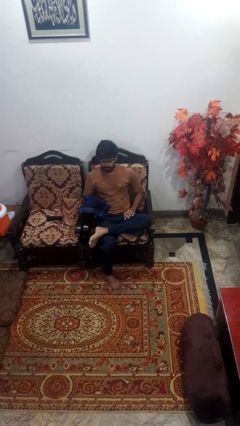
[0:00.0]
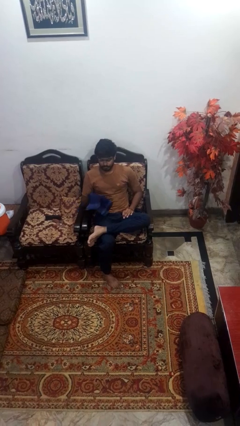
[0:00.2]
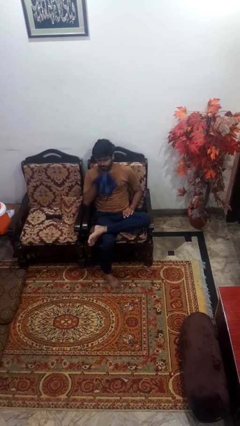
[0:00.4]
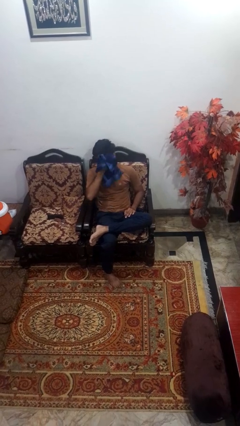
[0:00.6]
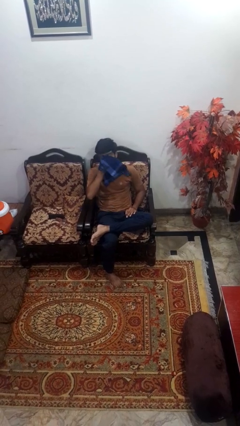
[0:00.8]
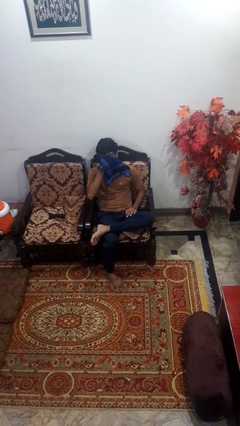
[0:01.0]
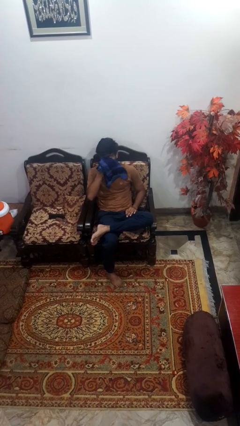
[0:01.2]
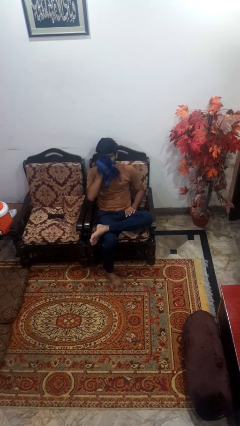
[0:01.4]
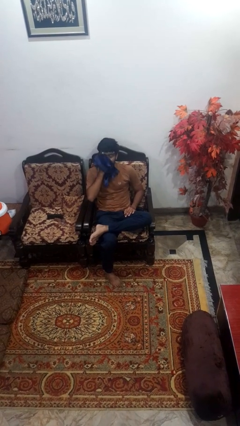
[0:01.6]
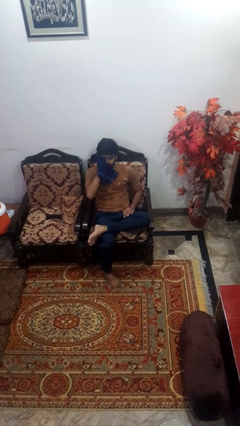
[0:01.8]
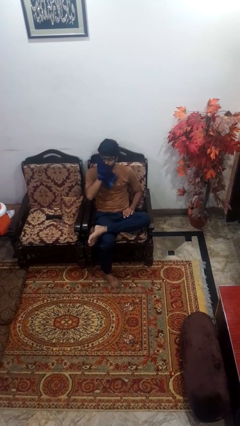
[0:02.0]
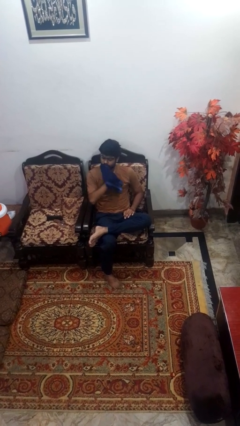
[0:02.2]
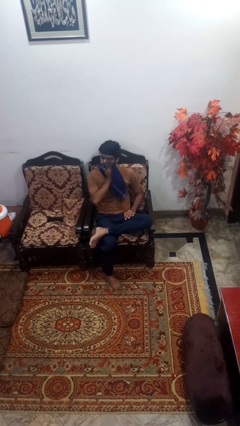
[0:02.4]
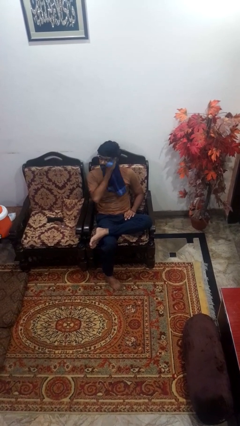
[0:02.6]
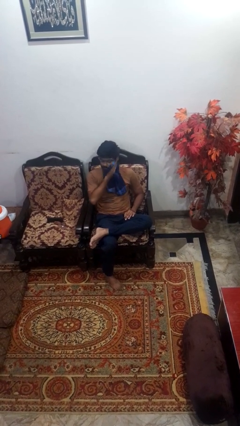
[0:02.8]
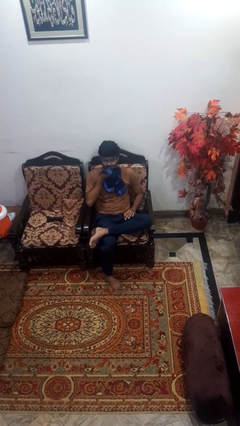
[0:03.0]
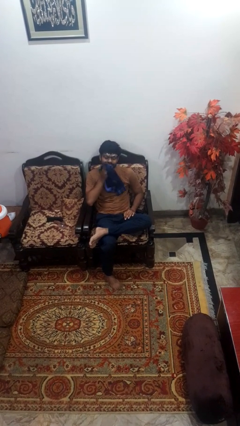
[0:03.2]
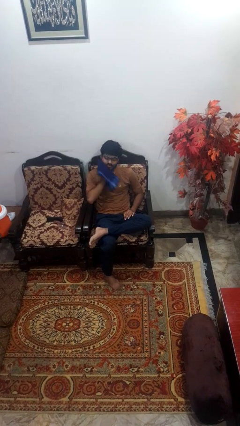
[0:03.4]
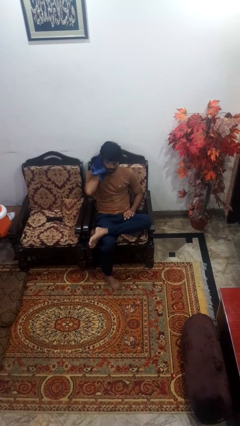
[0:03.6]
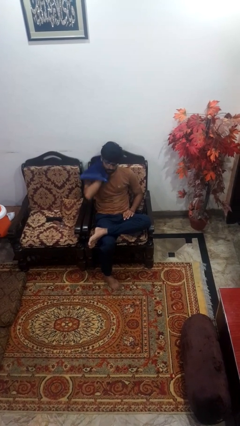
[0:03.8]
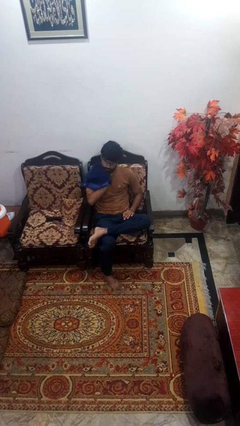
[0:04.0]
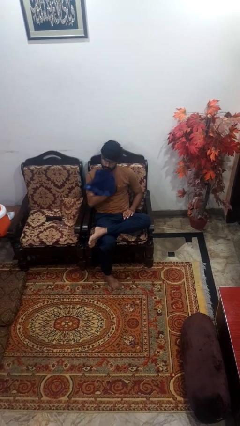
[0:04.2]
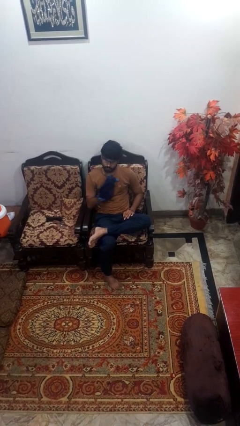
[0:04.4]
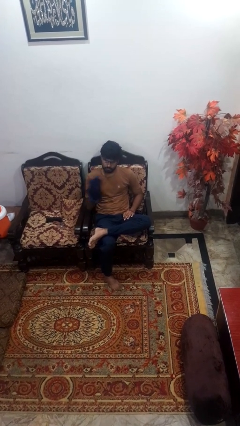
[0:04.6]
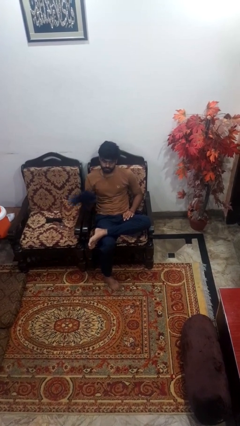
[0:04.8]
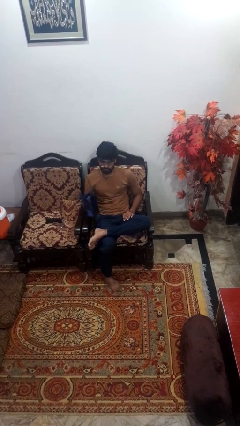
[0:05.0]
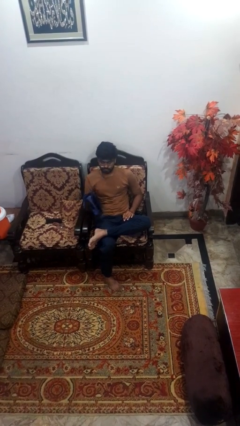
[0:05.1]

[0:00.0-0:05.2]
person wipes mouth with napkin

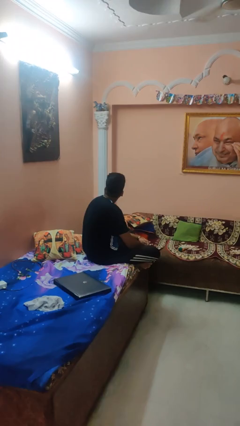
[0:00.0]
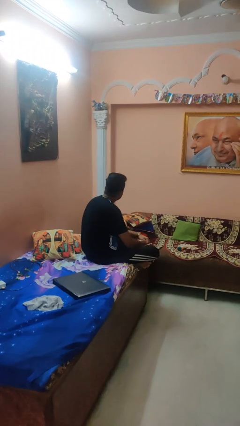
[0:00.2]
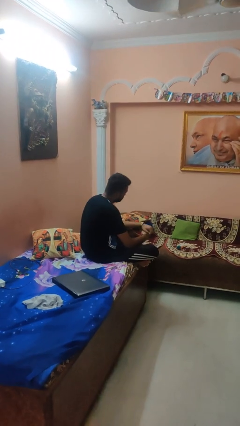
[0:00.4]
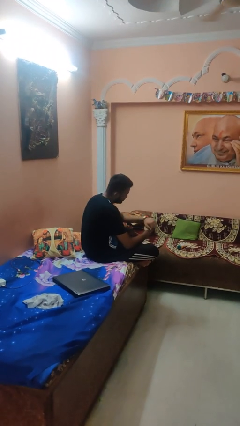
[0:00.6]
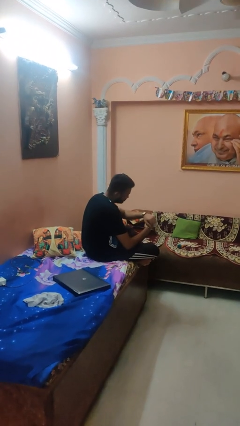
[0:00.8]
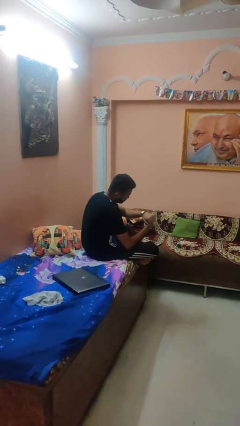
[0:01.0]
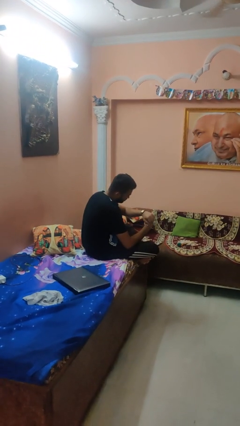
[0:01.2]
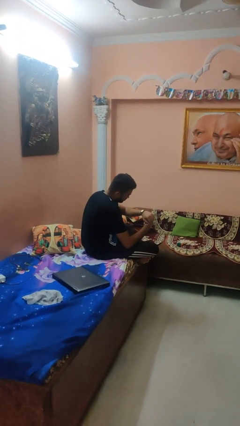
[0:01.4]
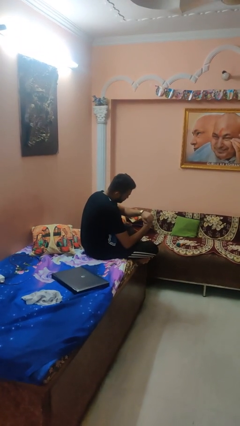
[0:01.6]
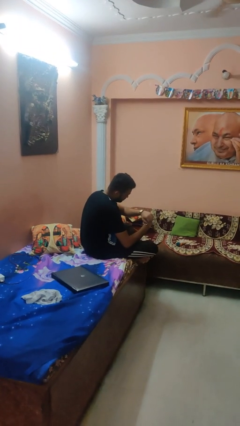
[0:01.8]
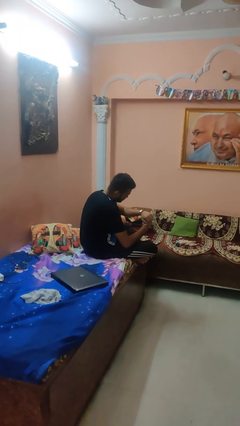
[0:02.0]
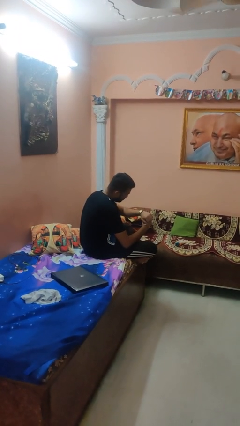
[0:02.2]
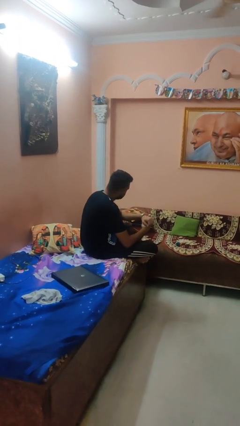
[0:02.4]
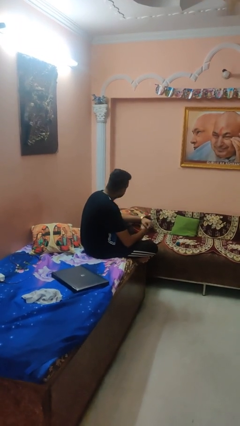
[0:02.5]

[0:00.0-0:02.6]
person looks at wristwatch

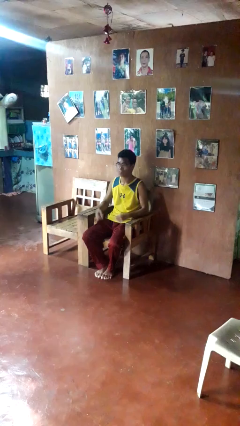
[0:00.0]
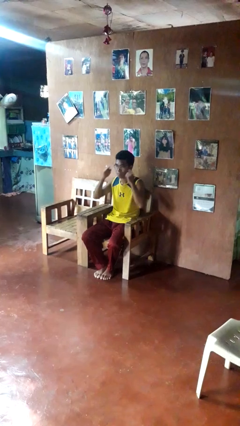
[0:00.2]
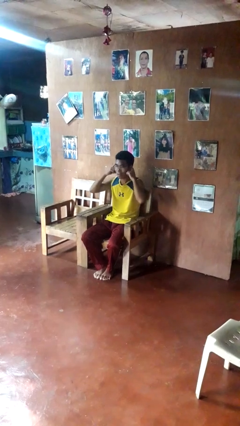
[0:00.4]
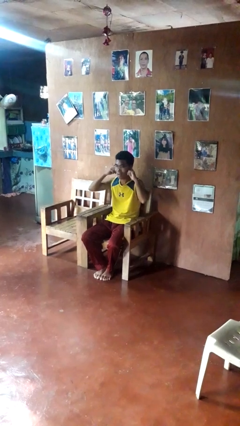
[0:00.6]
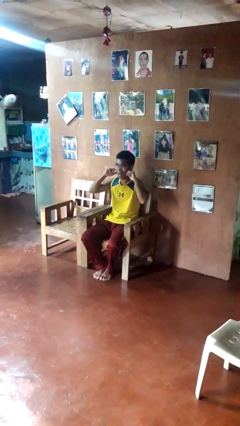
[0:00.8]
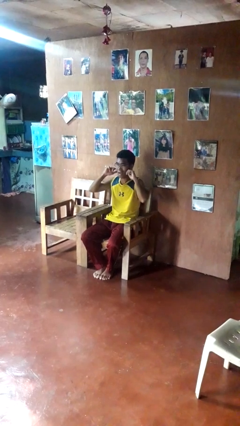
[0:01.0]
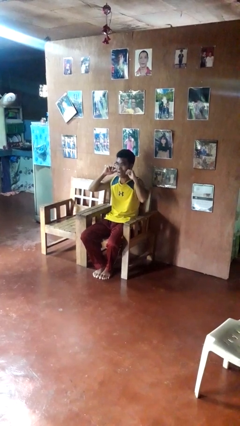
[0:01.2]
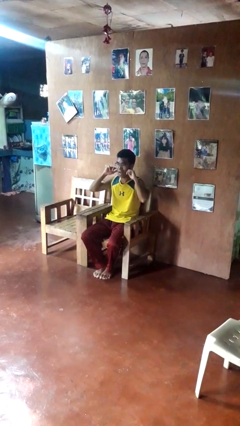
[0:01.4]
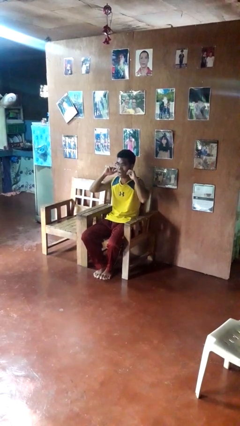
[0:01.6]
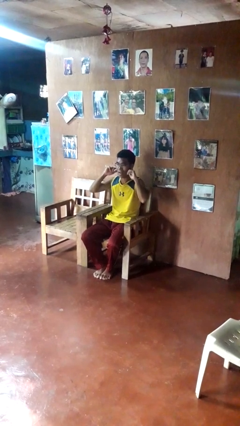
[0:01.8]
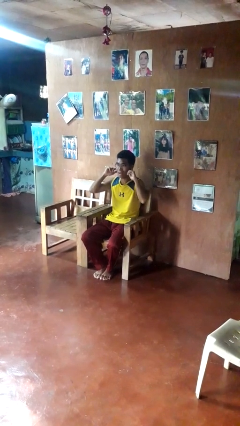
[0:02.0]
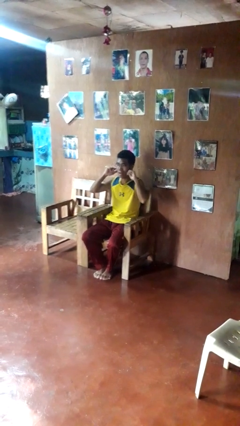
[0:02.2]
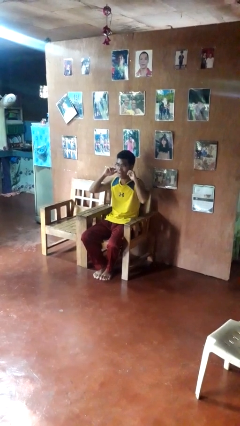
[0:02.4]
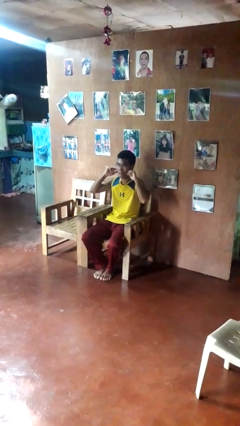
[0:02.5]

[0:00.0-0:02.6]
person puts fingers in ear

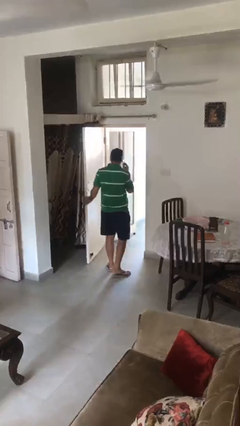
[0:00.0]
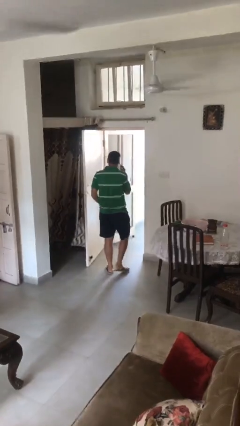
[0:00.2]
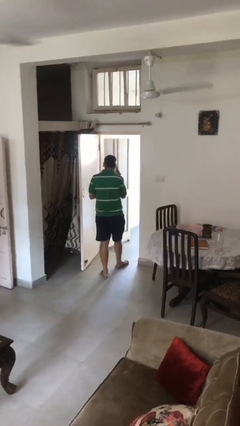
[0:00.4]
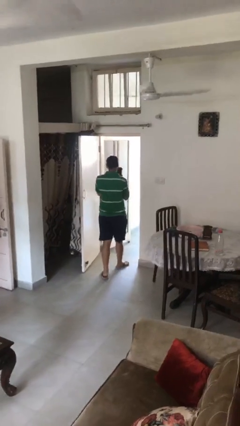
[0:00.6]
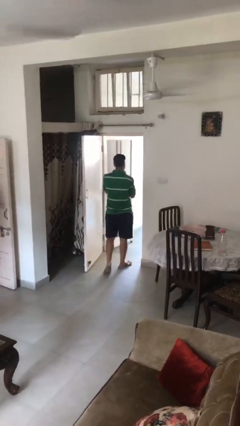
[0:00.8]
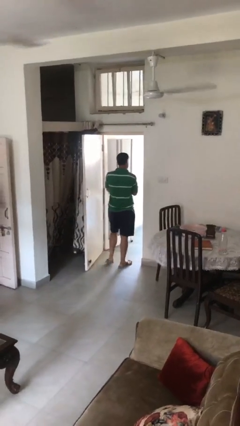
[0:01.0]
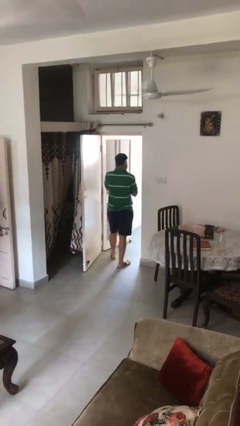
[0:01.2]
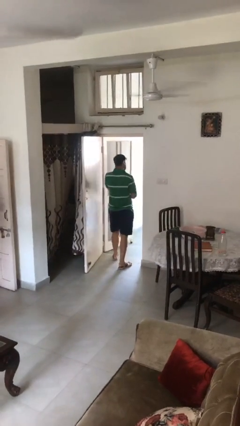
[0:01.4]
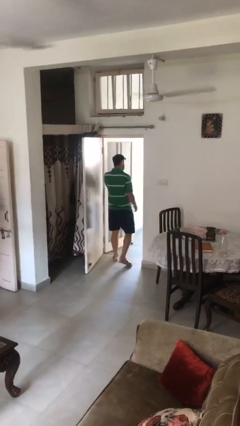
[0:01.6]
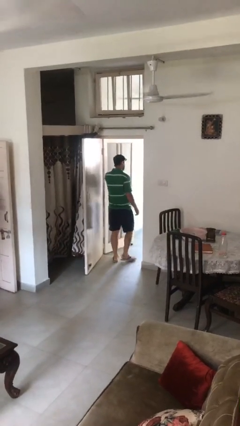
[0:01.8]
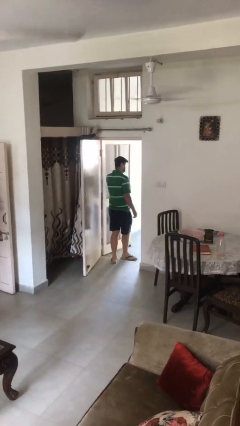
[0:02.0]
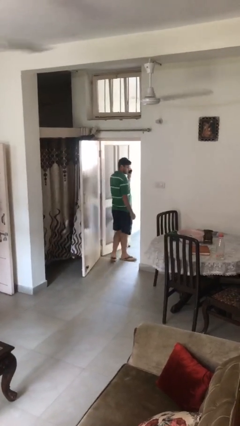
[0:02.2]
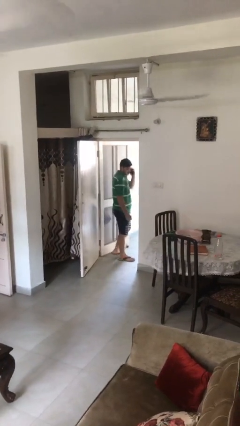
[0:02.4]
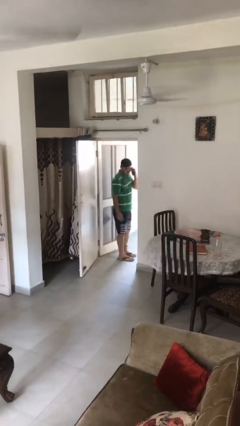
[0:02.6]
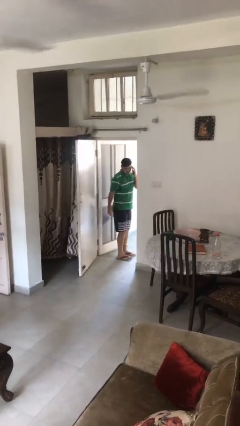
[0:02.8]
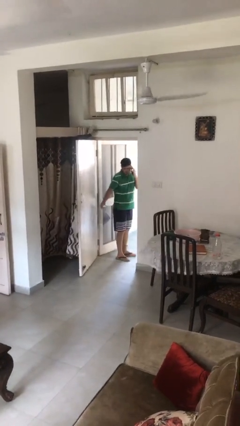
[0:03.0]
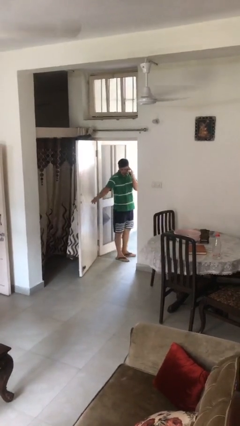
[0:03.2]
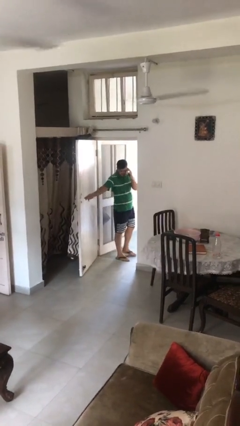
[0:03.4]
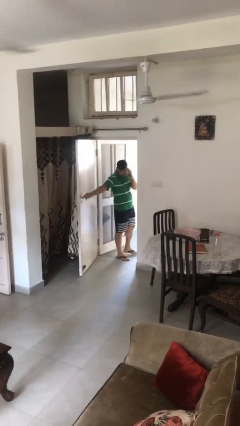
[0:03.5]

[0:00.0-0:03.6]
person exits scene through structure

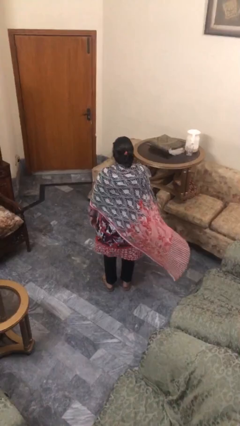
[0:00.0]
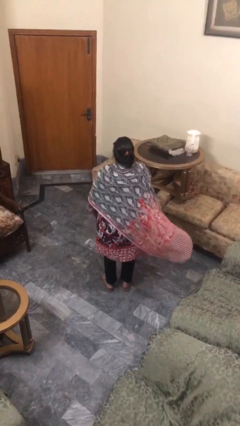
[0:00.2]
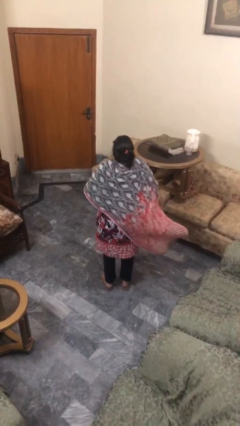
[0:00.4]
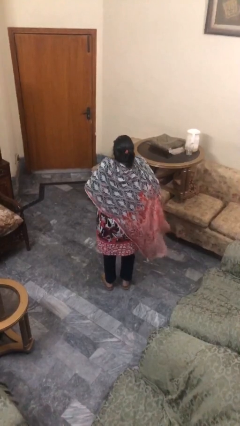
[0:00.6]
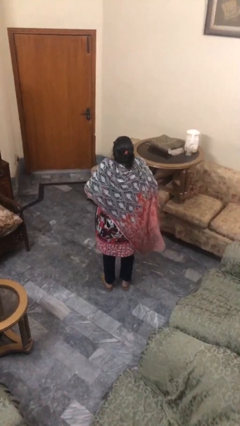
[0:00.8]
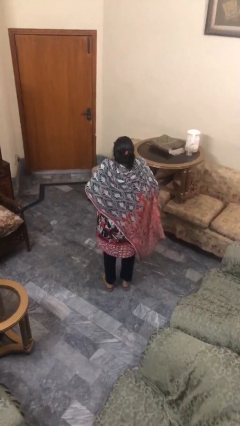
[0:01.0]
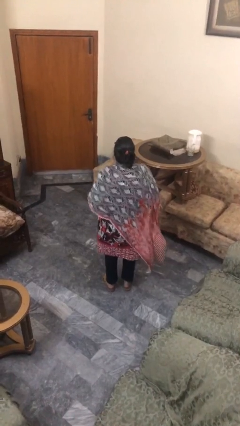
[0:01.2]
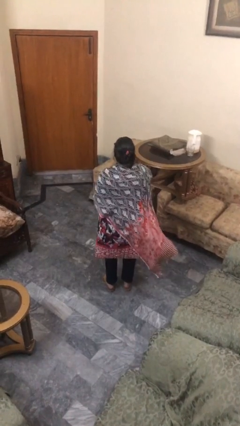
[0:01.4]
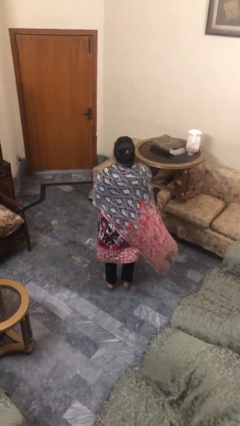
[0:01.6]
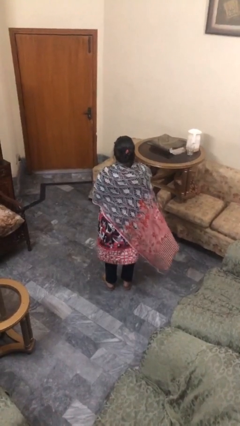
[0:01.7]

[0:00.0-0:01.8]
person shrugs

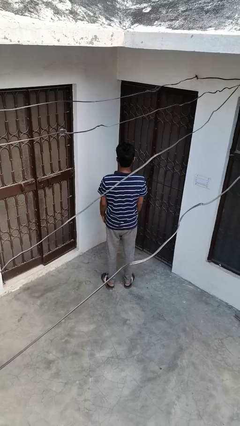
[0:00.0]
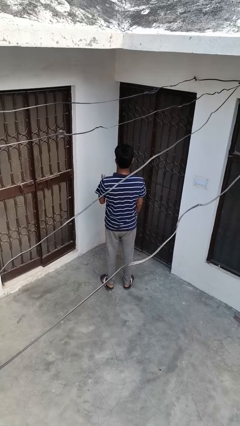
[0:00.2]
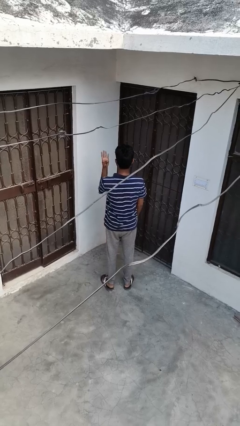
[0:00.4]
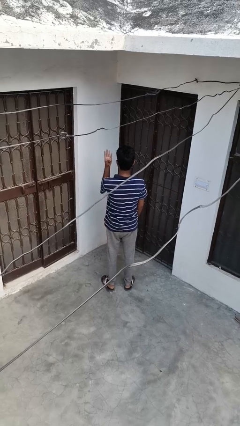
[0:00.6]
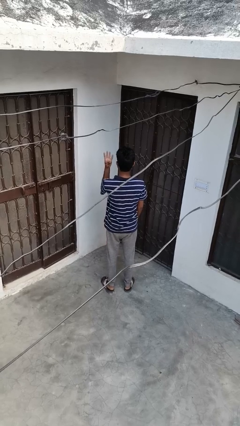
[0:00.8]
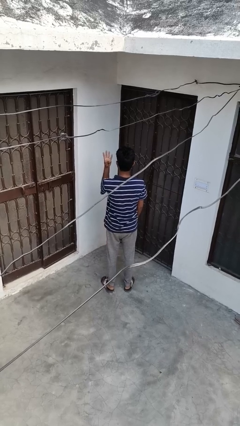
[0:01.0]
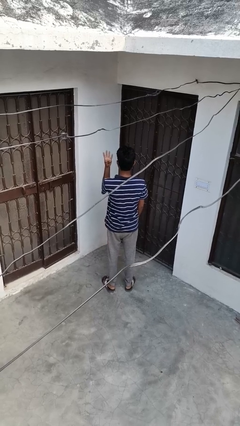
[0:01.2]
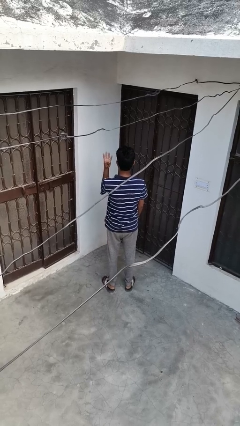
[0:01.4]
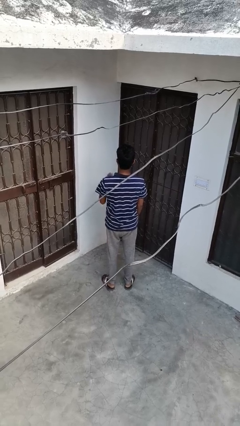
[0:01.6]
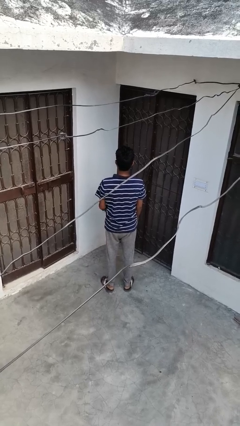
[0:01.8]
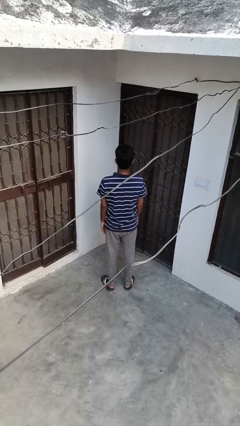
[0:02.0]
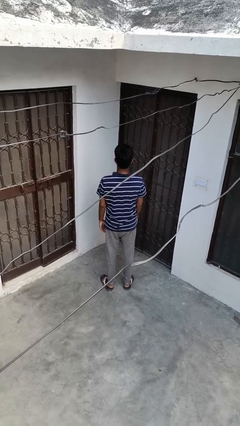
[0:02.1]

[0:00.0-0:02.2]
person gestures number four
